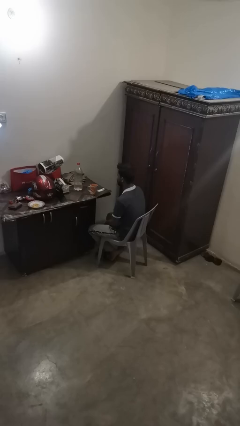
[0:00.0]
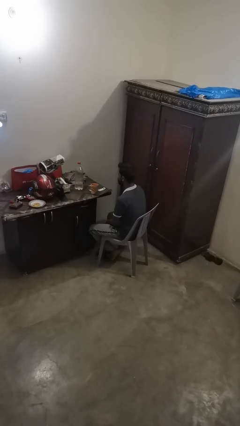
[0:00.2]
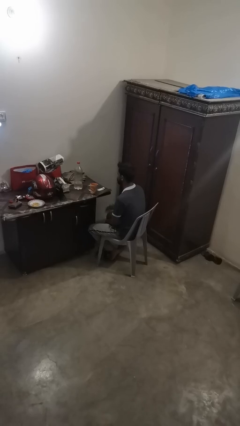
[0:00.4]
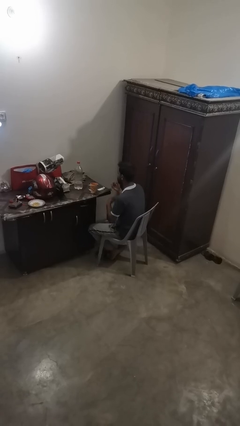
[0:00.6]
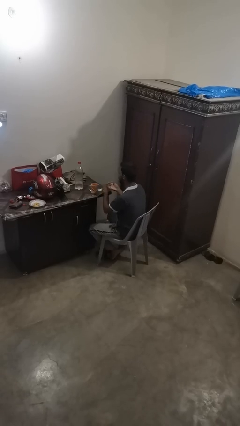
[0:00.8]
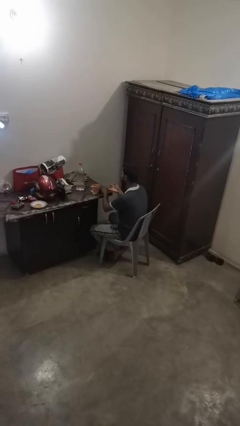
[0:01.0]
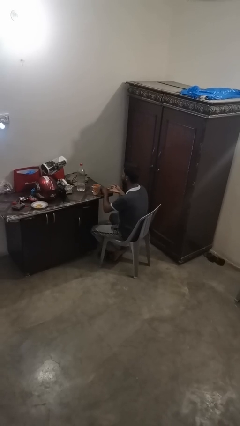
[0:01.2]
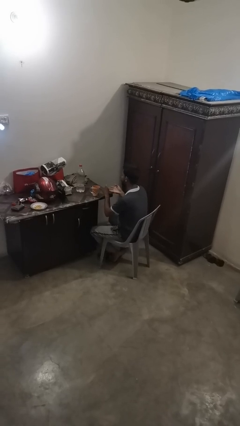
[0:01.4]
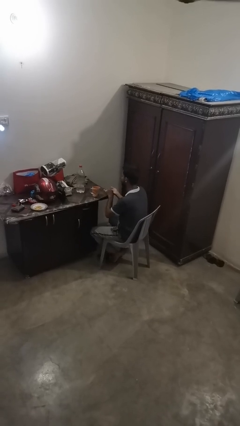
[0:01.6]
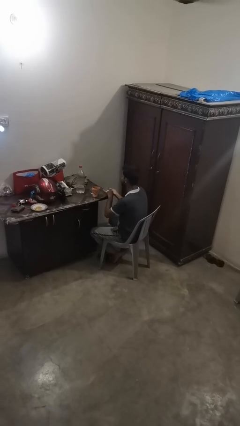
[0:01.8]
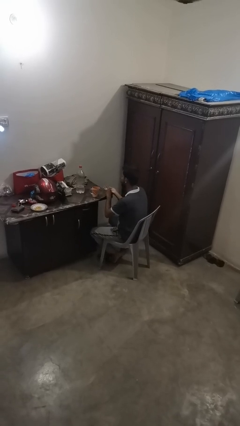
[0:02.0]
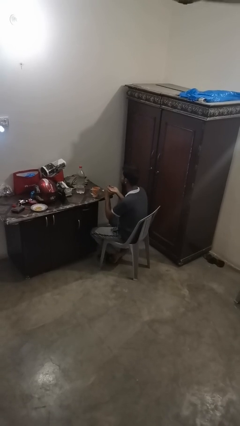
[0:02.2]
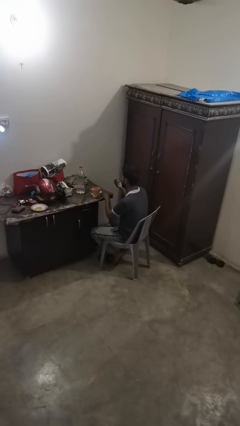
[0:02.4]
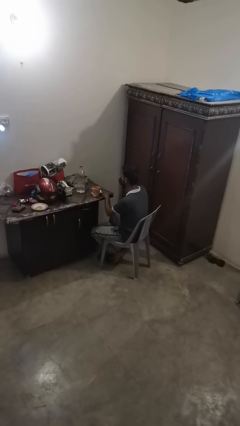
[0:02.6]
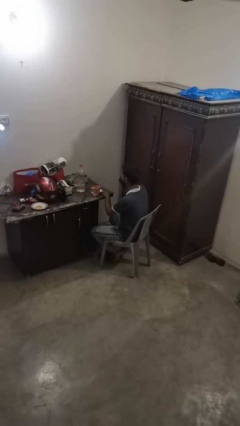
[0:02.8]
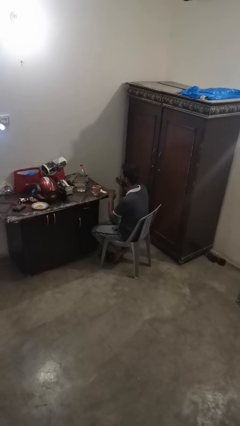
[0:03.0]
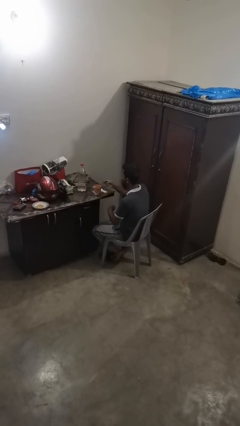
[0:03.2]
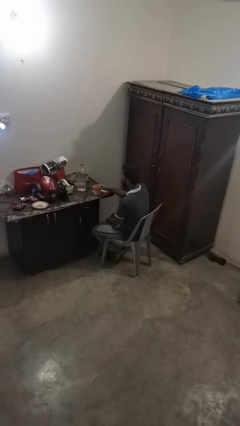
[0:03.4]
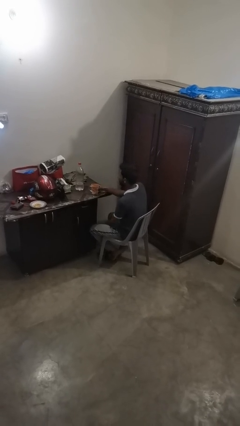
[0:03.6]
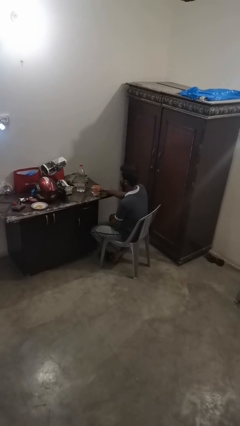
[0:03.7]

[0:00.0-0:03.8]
person takes medicine pills

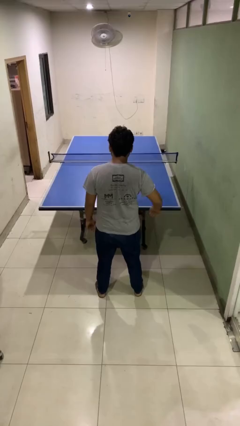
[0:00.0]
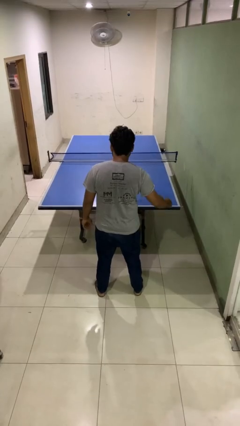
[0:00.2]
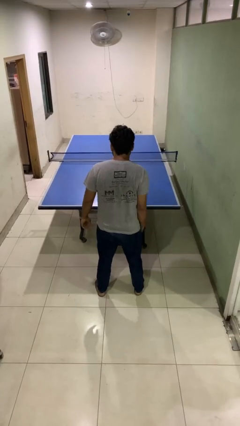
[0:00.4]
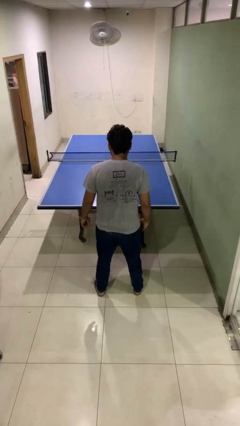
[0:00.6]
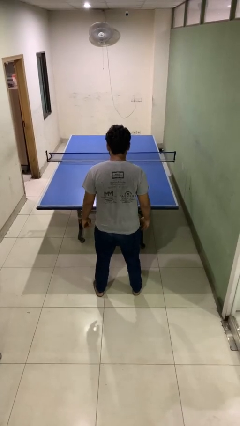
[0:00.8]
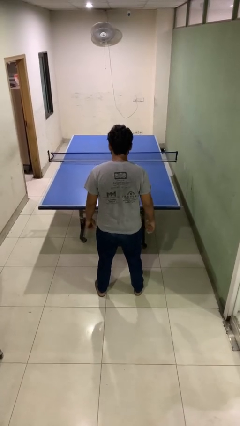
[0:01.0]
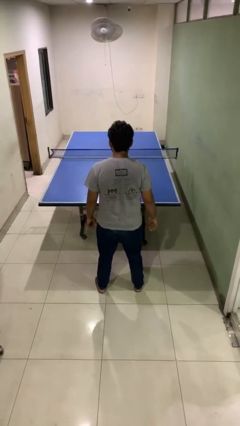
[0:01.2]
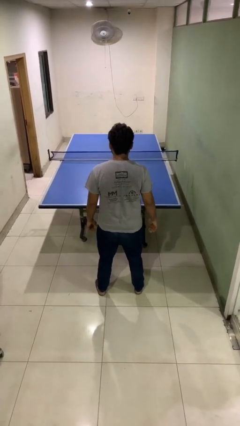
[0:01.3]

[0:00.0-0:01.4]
person slaps hands on thighs

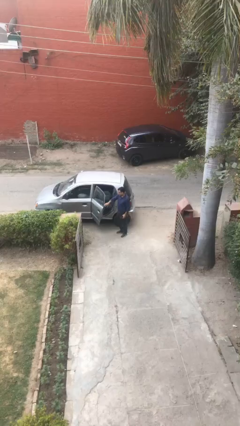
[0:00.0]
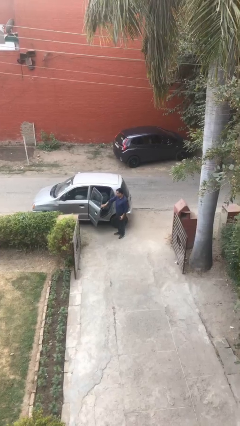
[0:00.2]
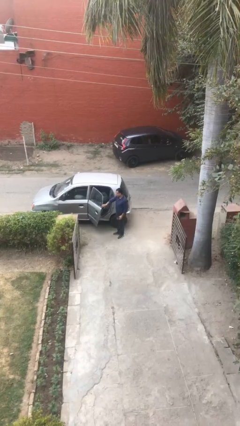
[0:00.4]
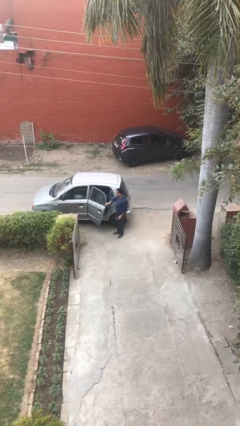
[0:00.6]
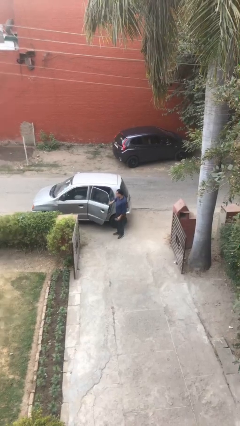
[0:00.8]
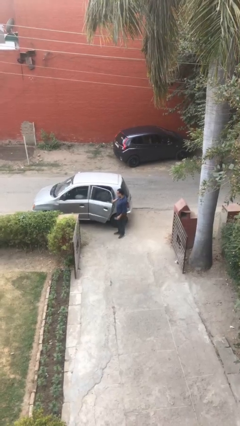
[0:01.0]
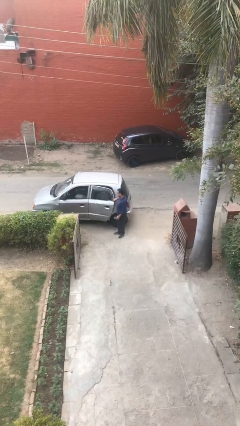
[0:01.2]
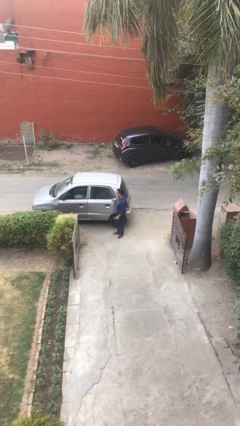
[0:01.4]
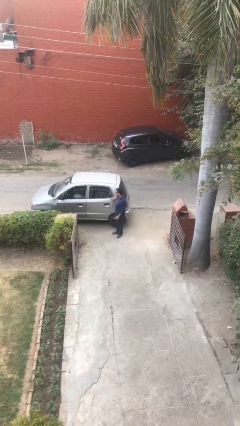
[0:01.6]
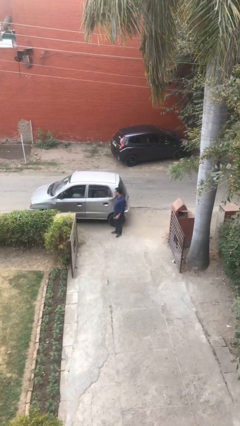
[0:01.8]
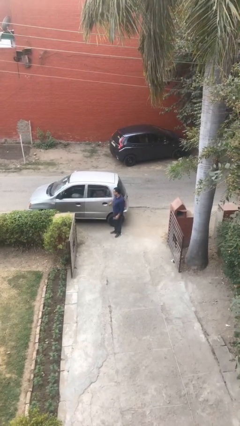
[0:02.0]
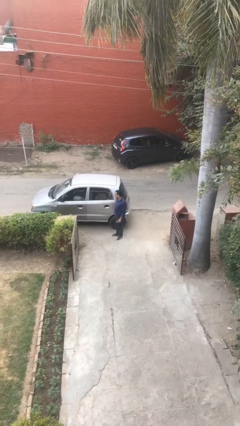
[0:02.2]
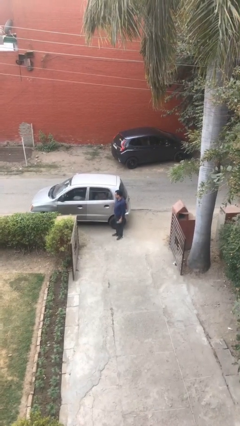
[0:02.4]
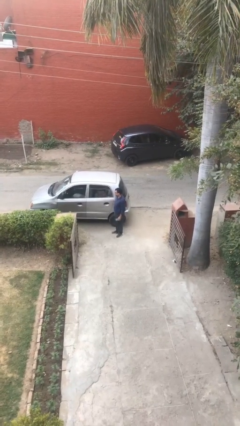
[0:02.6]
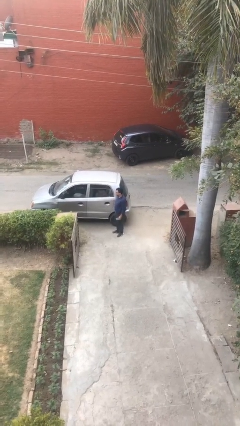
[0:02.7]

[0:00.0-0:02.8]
person closes car door

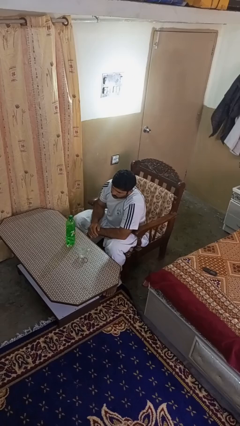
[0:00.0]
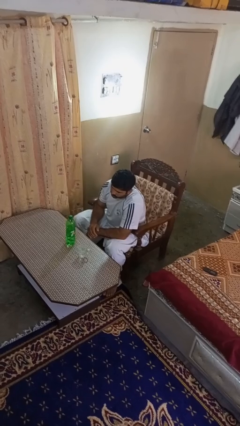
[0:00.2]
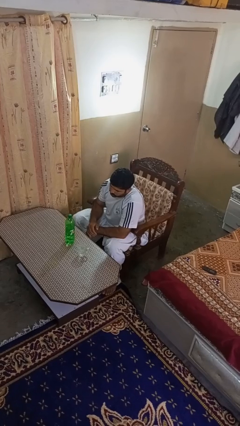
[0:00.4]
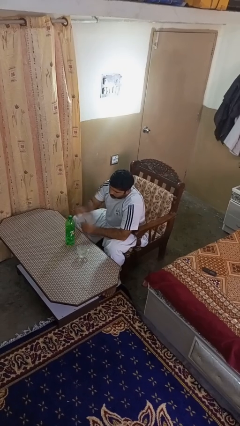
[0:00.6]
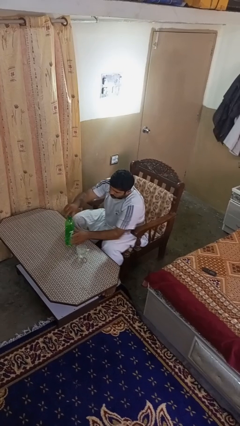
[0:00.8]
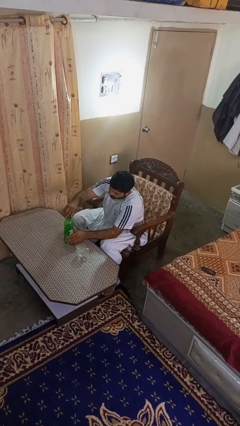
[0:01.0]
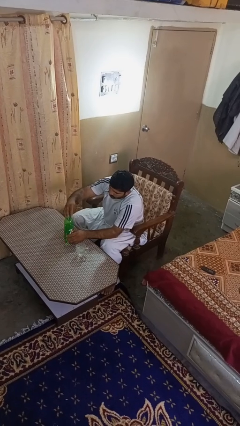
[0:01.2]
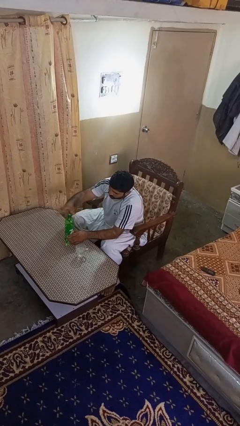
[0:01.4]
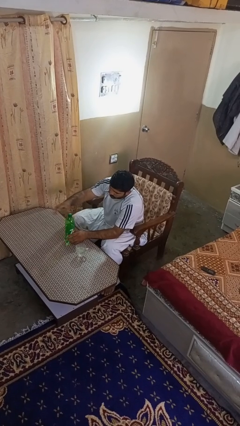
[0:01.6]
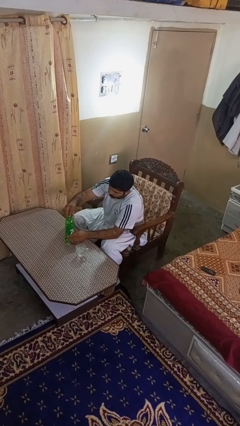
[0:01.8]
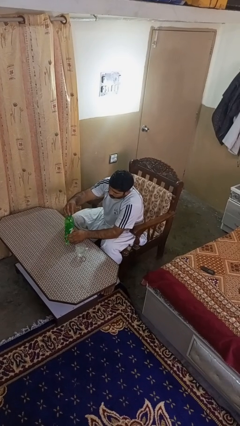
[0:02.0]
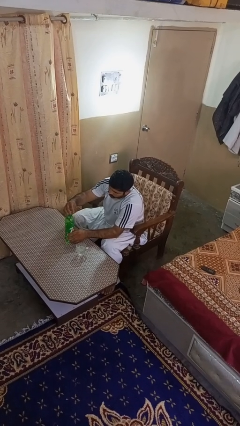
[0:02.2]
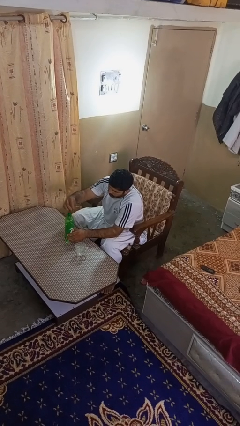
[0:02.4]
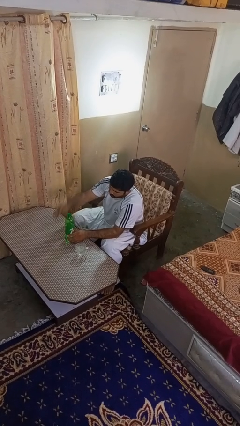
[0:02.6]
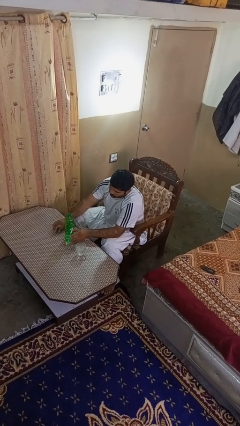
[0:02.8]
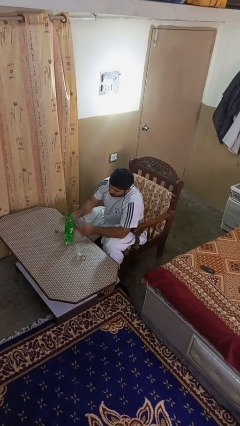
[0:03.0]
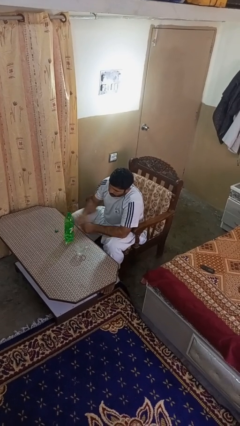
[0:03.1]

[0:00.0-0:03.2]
person unscrews lid from bottle

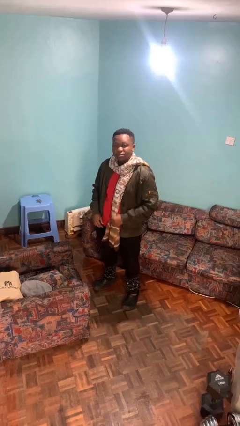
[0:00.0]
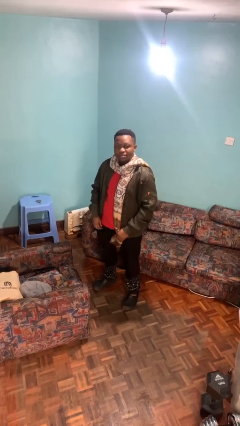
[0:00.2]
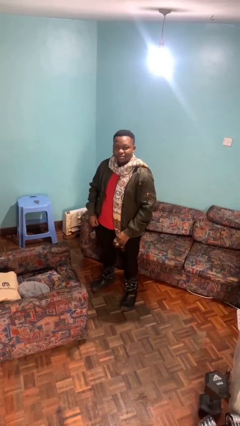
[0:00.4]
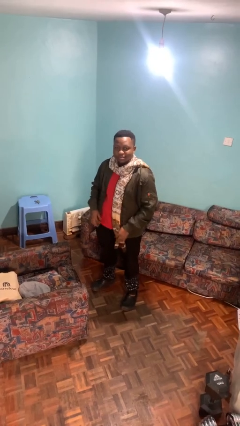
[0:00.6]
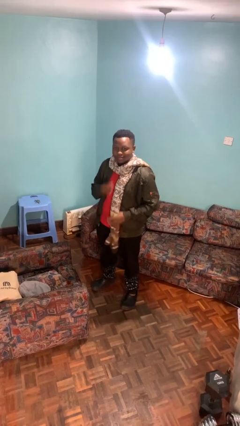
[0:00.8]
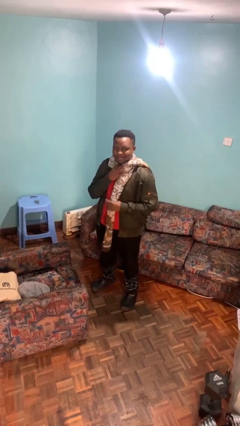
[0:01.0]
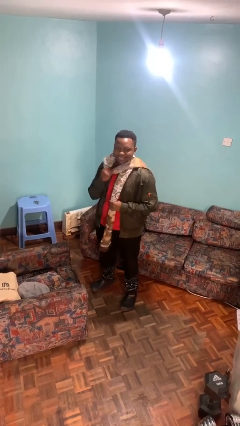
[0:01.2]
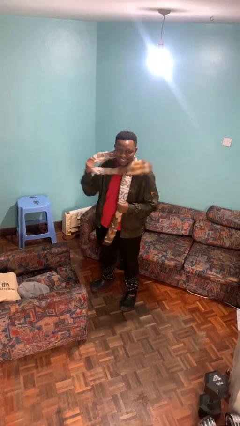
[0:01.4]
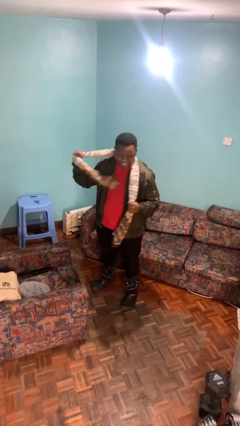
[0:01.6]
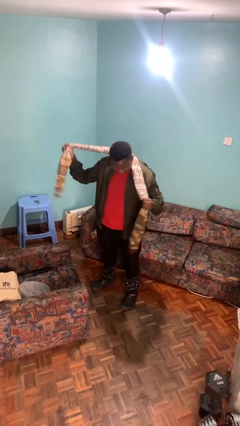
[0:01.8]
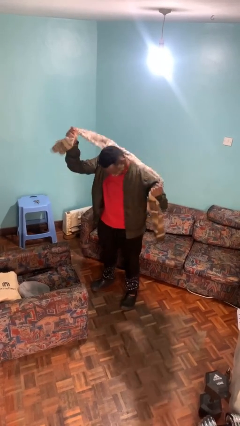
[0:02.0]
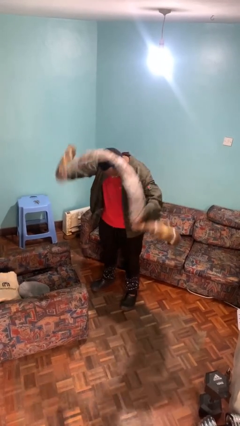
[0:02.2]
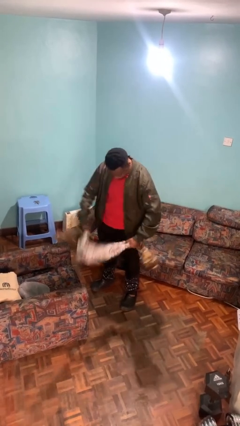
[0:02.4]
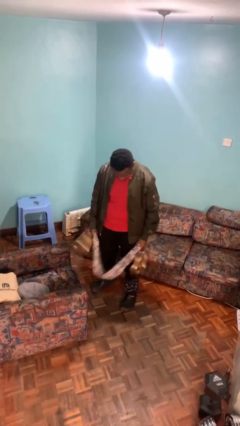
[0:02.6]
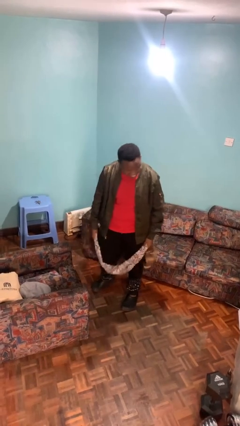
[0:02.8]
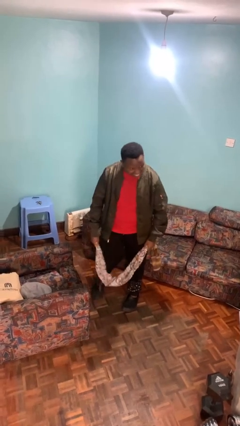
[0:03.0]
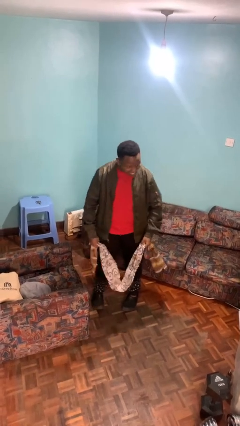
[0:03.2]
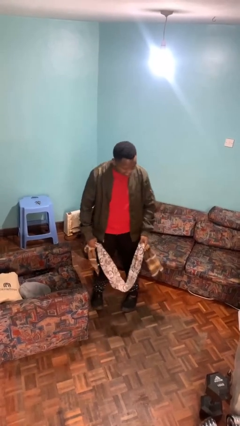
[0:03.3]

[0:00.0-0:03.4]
person takes off scarf

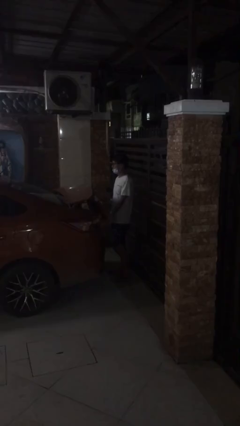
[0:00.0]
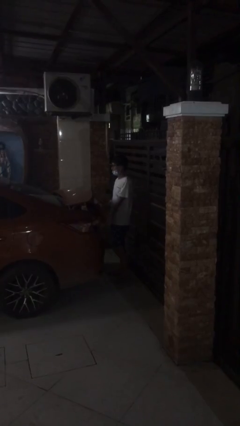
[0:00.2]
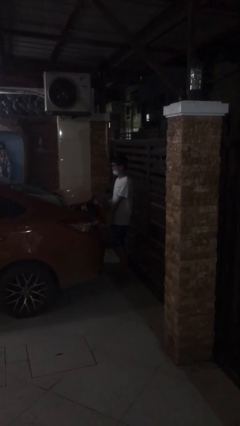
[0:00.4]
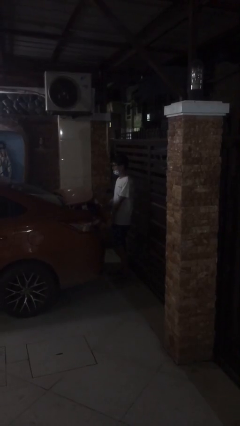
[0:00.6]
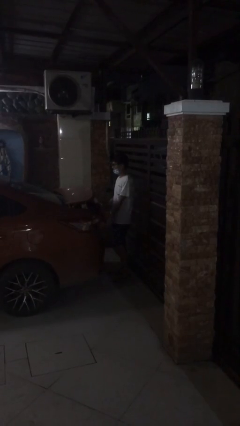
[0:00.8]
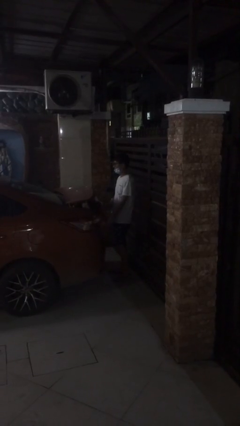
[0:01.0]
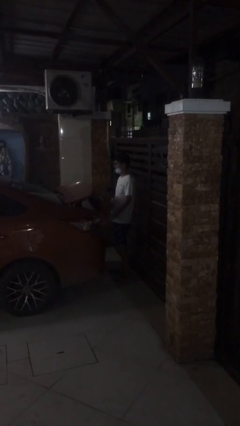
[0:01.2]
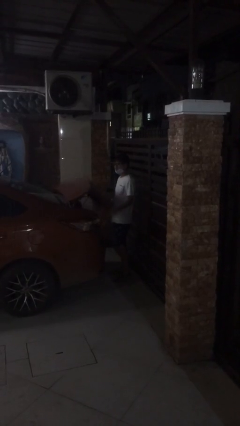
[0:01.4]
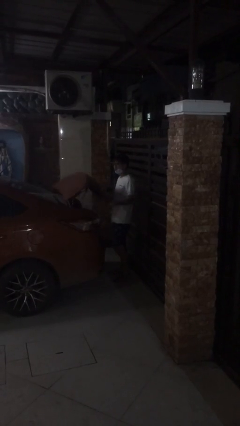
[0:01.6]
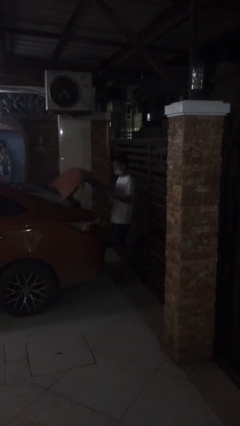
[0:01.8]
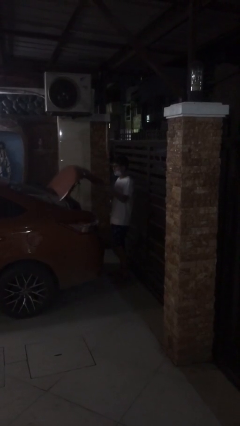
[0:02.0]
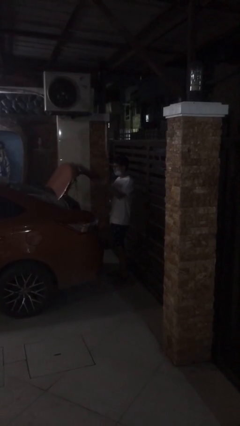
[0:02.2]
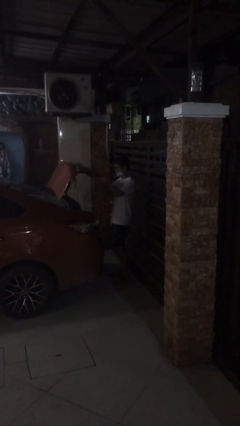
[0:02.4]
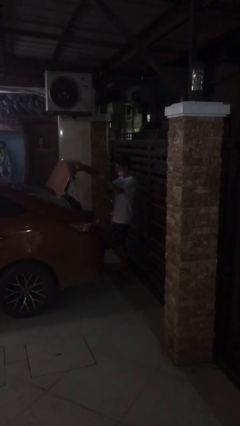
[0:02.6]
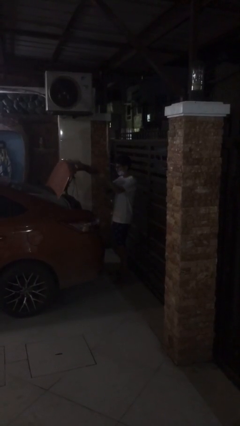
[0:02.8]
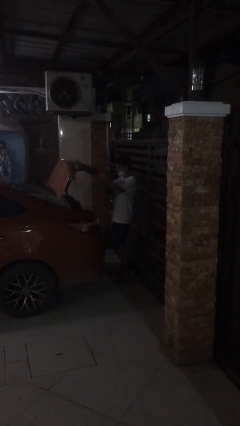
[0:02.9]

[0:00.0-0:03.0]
person opens car trunk
